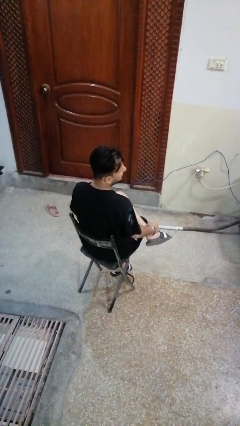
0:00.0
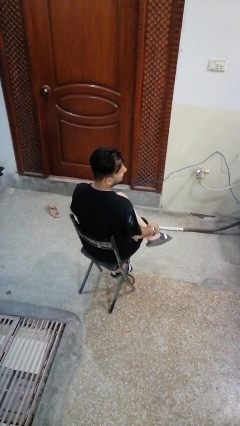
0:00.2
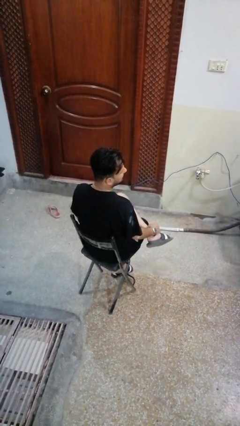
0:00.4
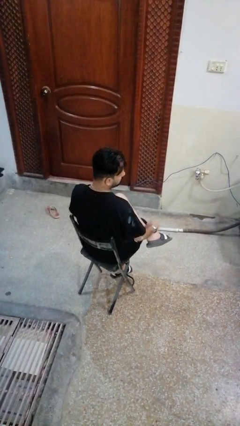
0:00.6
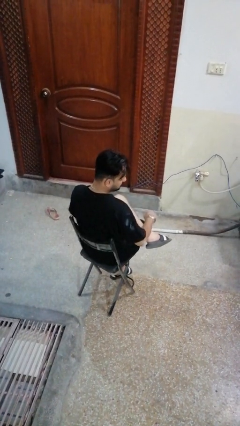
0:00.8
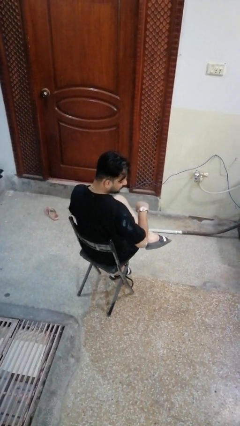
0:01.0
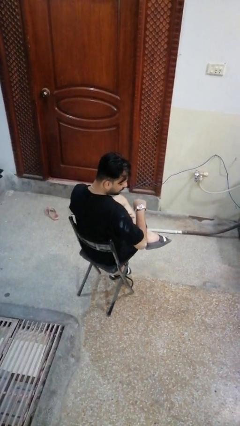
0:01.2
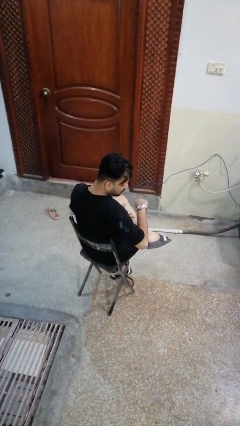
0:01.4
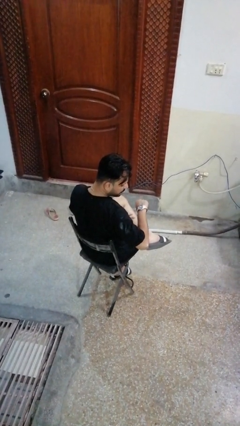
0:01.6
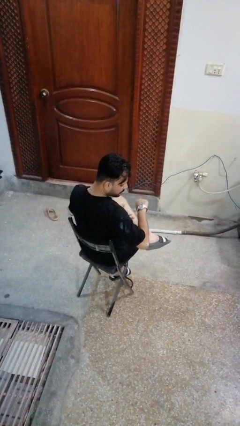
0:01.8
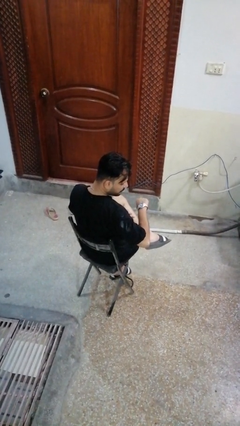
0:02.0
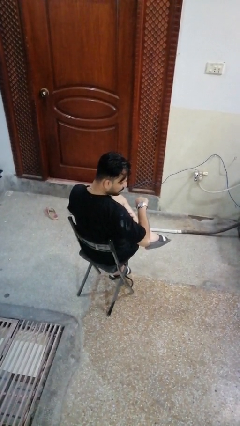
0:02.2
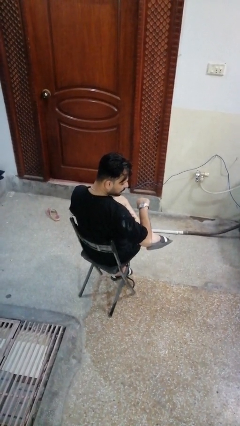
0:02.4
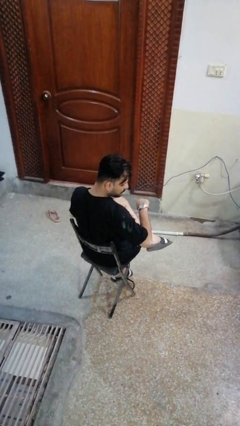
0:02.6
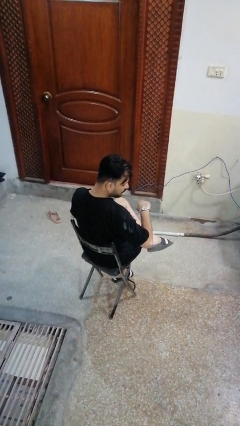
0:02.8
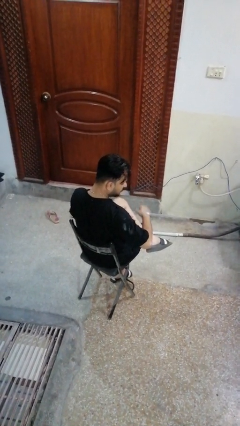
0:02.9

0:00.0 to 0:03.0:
person looks at wristwatch

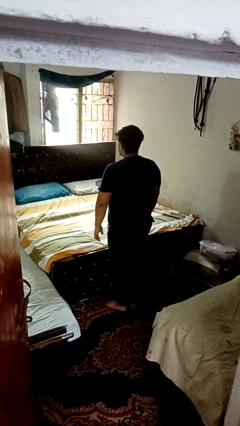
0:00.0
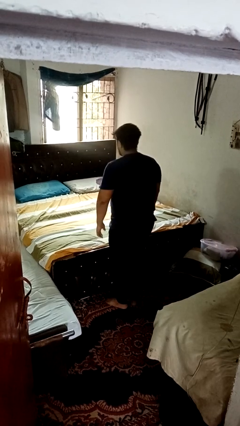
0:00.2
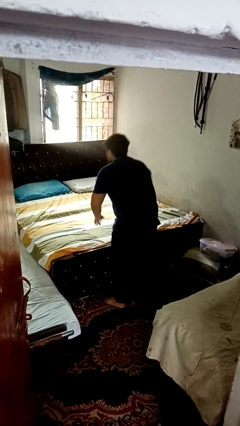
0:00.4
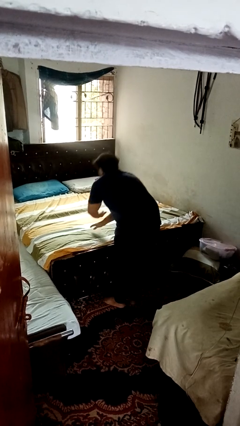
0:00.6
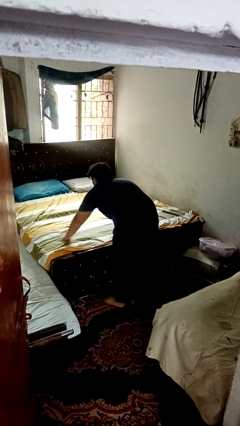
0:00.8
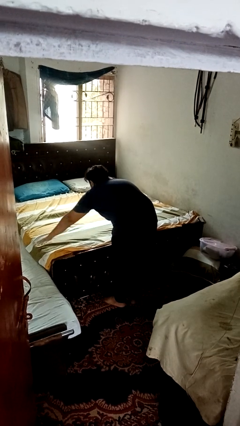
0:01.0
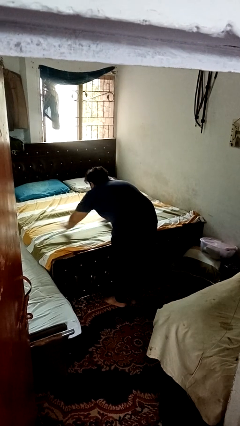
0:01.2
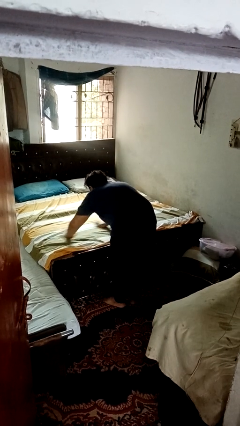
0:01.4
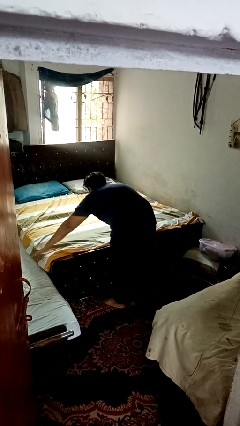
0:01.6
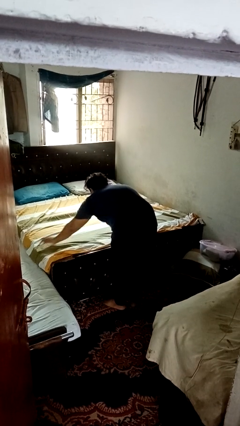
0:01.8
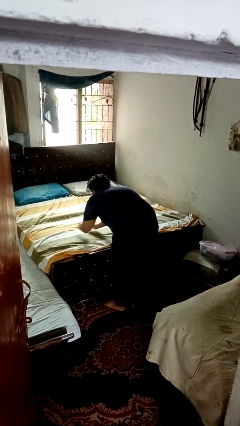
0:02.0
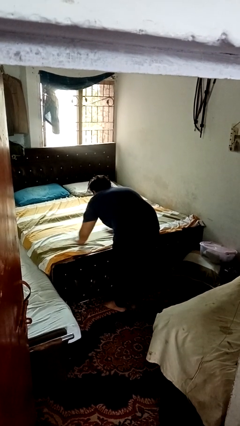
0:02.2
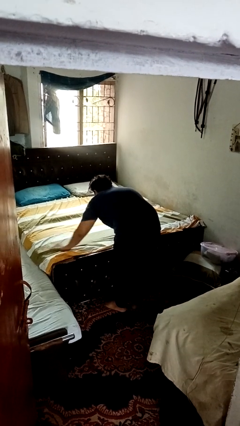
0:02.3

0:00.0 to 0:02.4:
person makes bed

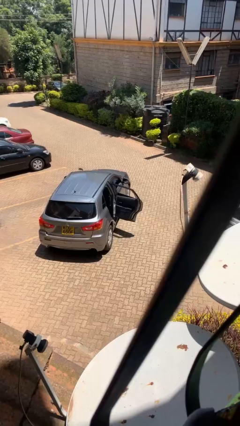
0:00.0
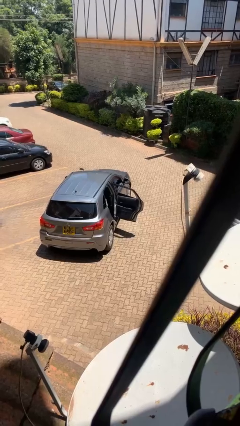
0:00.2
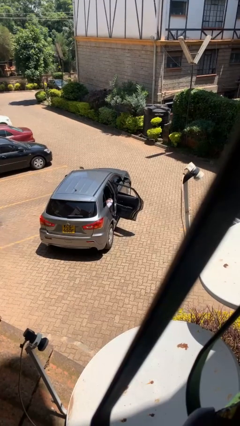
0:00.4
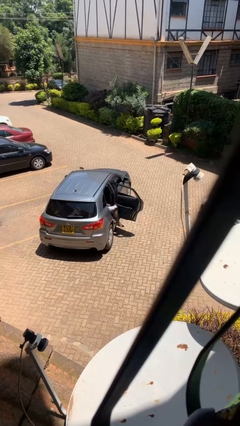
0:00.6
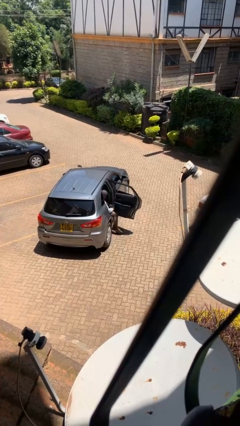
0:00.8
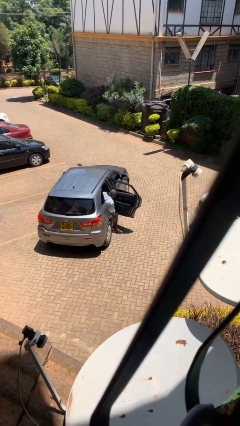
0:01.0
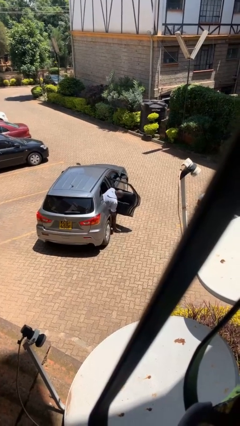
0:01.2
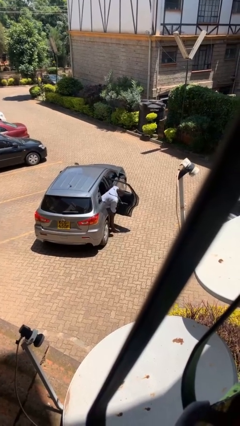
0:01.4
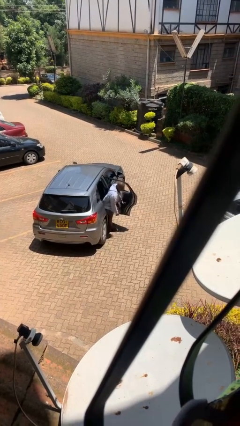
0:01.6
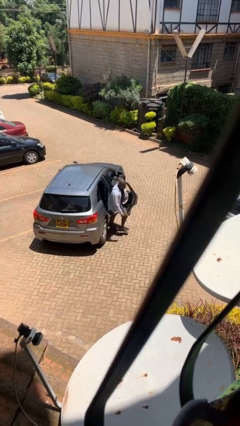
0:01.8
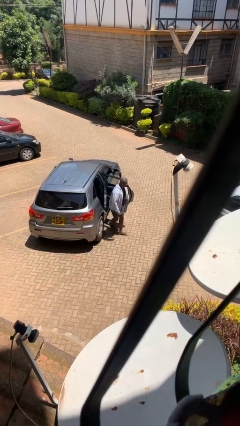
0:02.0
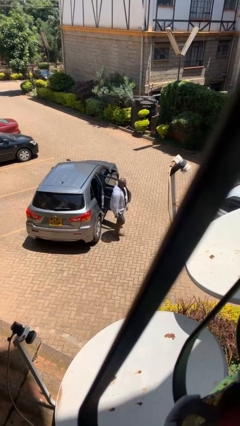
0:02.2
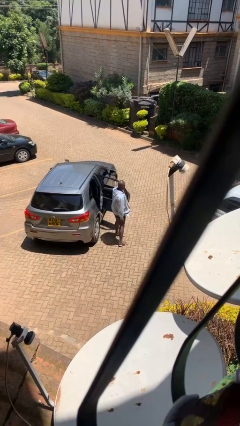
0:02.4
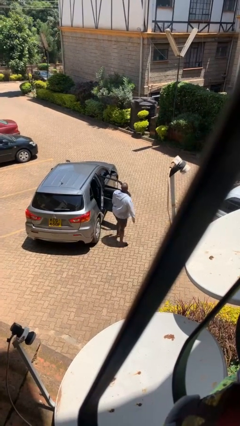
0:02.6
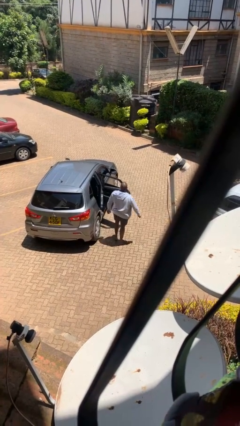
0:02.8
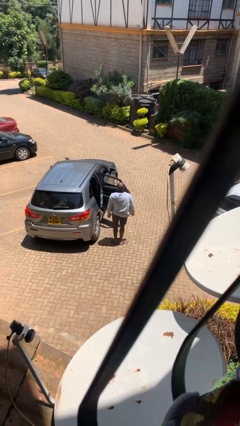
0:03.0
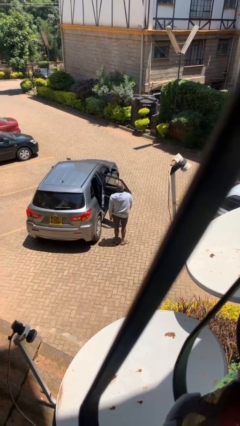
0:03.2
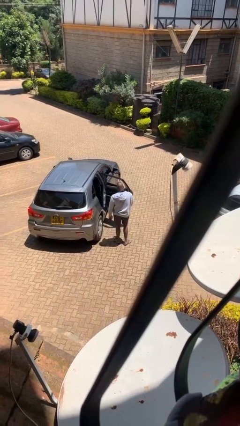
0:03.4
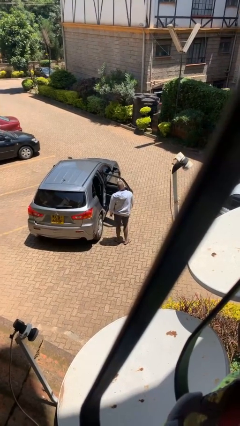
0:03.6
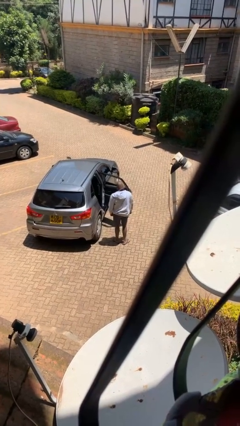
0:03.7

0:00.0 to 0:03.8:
person exits car

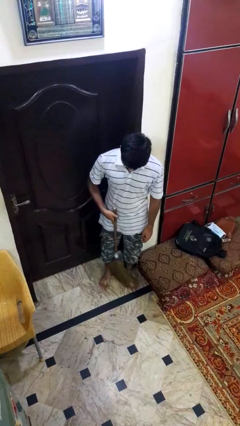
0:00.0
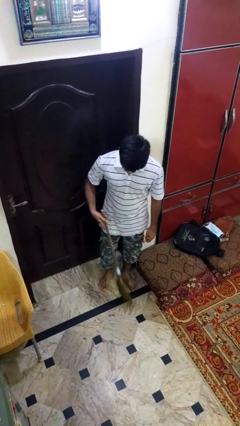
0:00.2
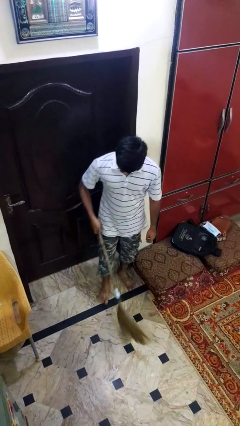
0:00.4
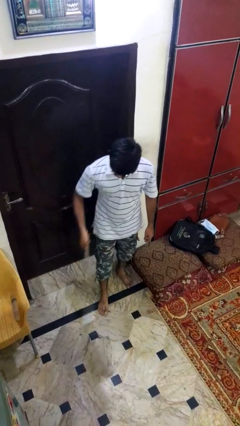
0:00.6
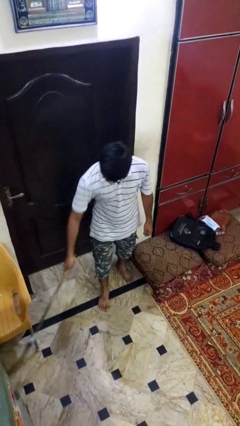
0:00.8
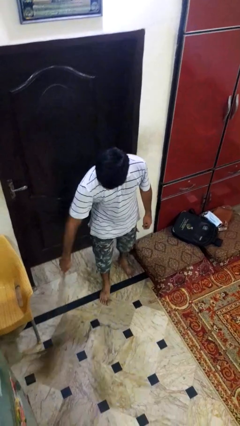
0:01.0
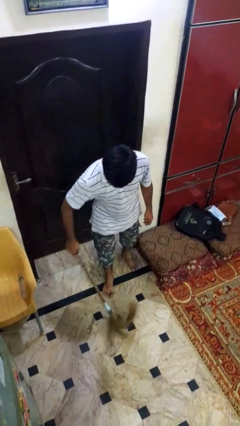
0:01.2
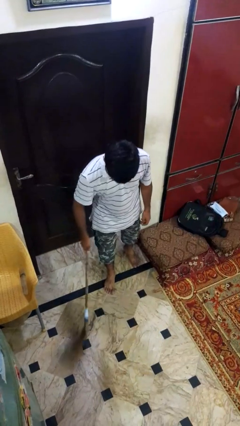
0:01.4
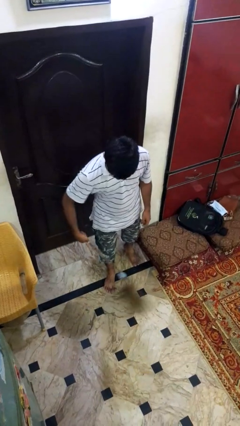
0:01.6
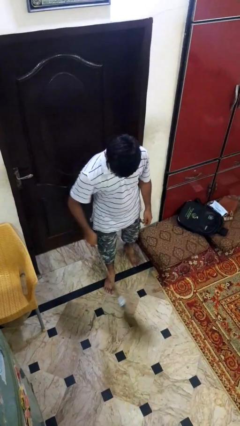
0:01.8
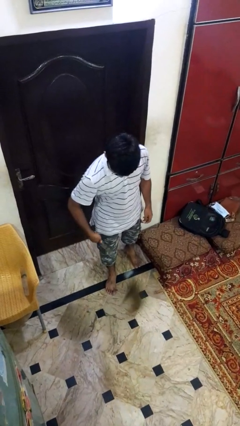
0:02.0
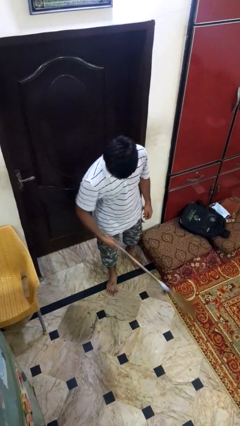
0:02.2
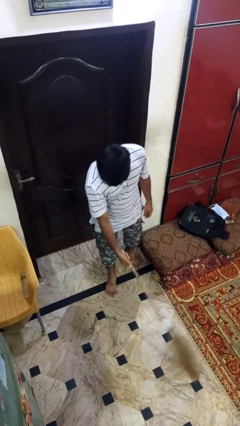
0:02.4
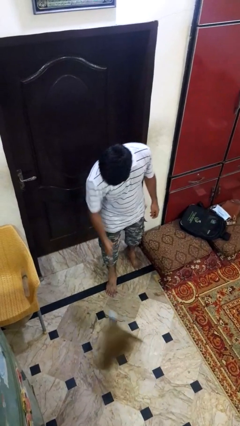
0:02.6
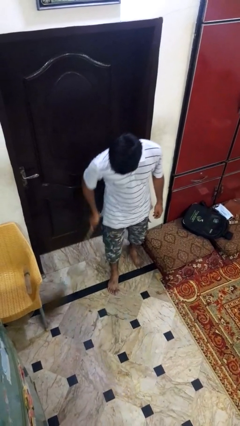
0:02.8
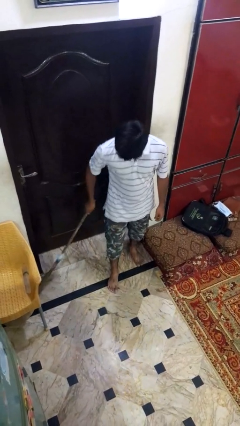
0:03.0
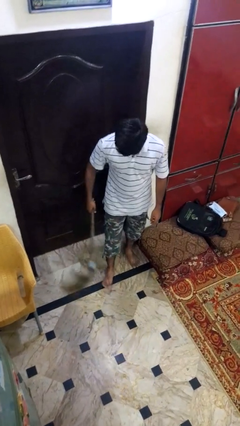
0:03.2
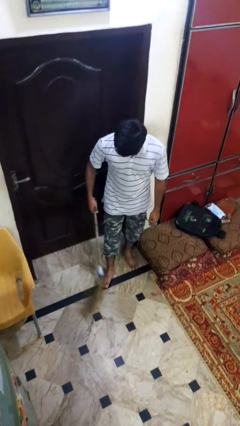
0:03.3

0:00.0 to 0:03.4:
person sweeps floor

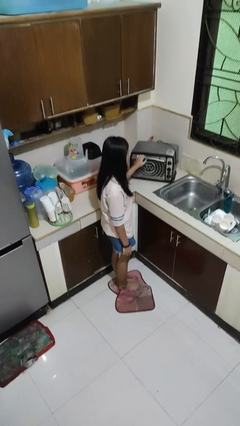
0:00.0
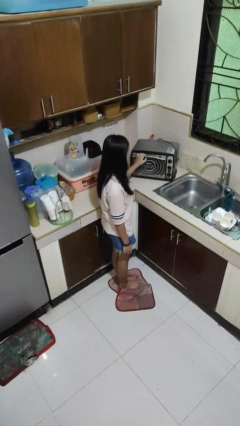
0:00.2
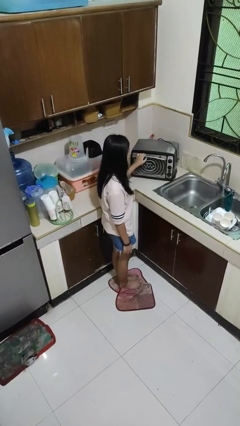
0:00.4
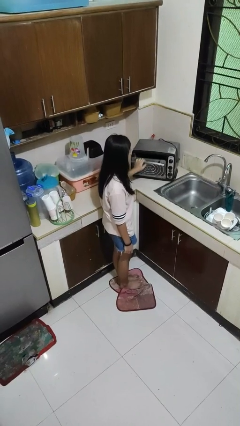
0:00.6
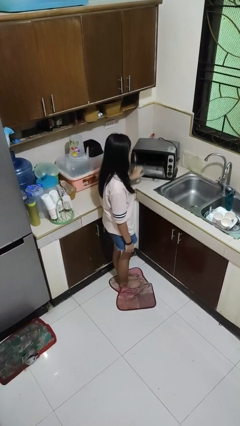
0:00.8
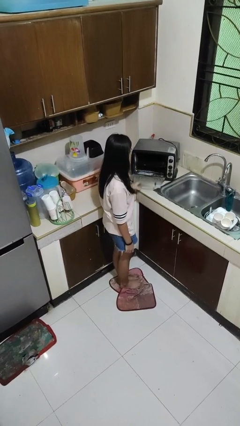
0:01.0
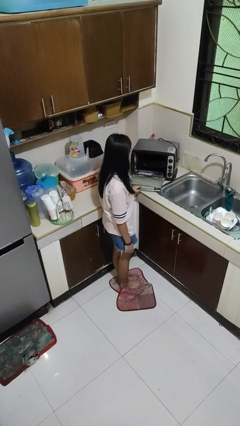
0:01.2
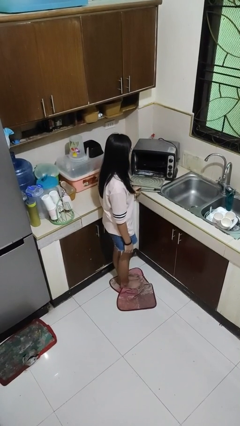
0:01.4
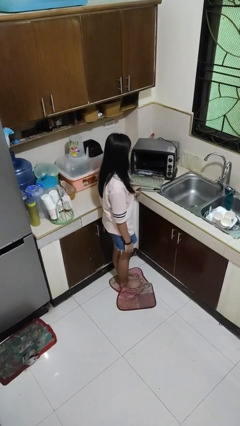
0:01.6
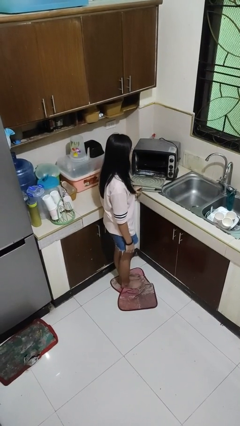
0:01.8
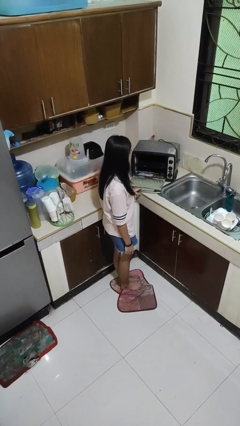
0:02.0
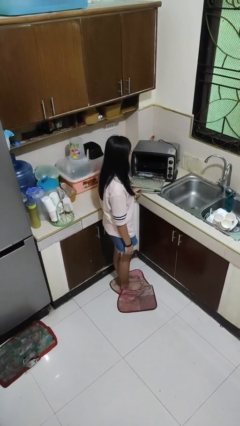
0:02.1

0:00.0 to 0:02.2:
person opens microwave

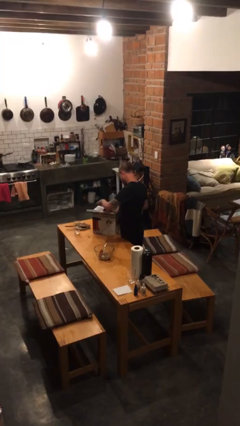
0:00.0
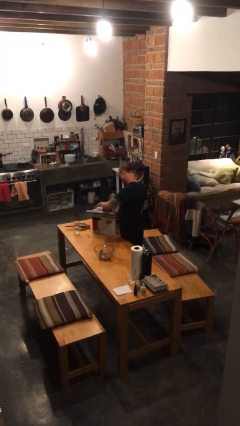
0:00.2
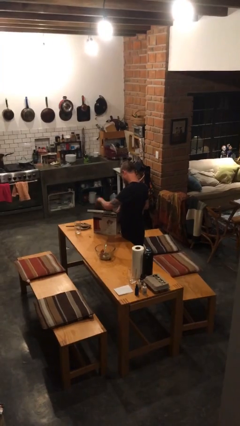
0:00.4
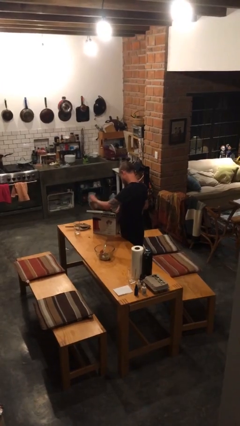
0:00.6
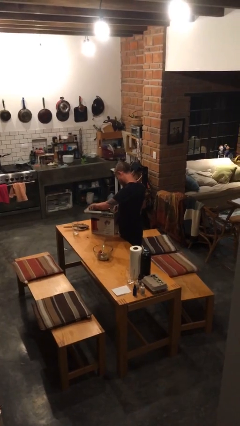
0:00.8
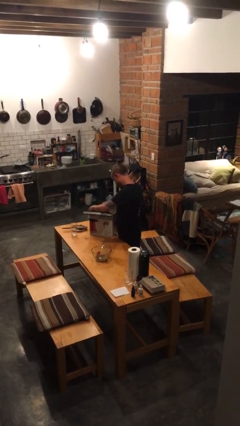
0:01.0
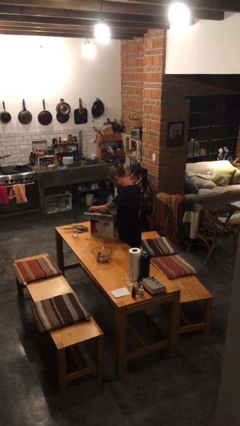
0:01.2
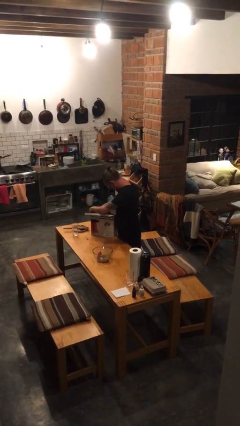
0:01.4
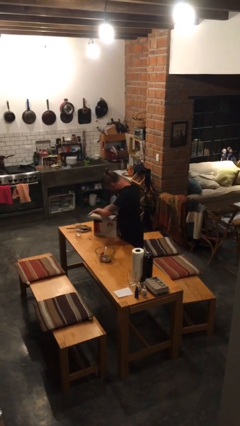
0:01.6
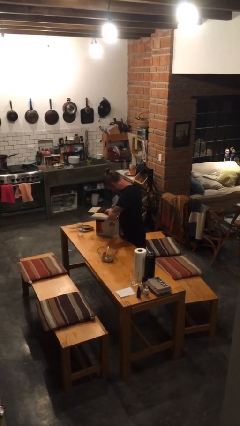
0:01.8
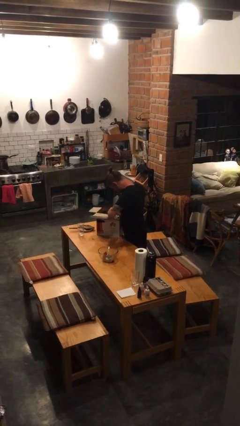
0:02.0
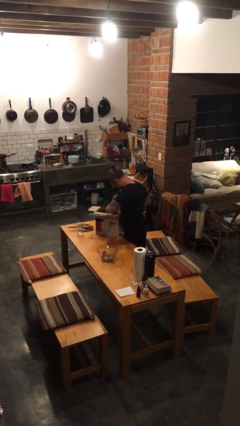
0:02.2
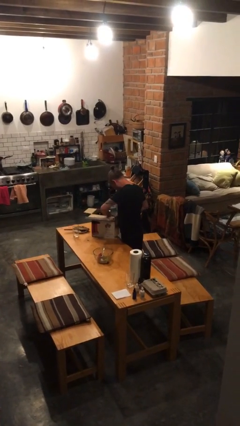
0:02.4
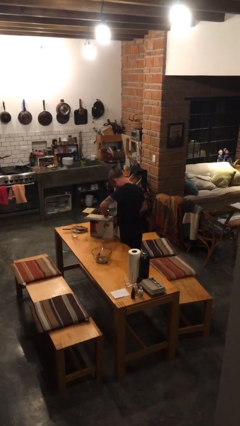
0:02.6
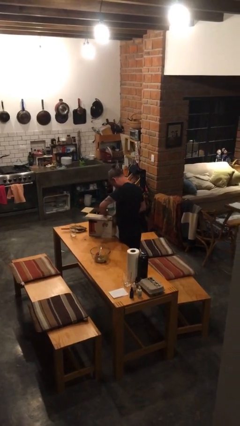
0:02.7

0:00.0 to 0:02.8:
person searches in box
